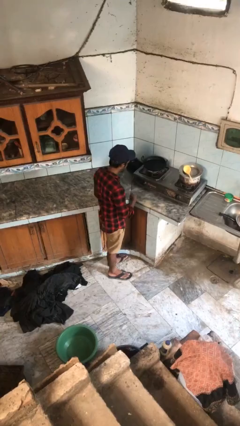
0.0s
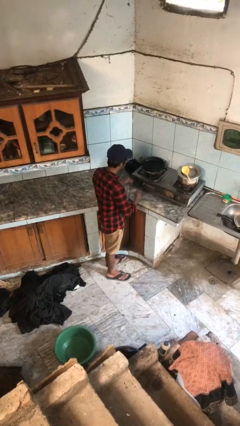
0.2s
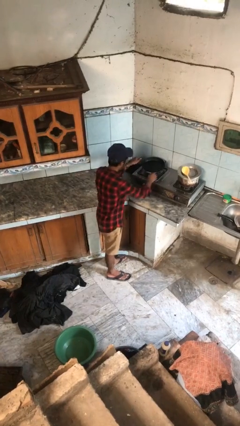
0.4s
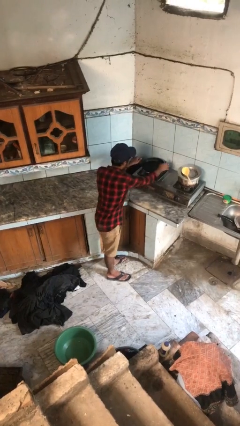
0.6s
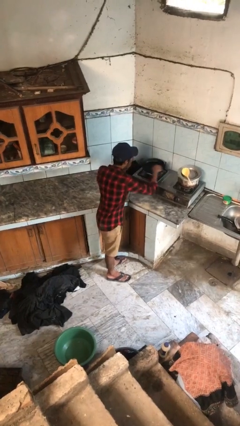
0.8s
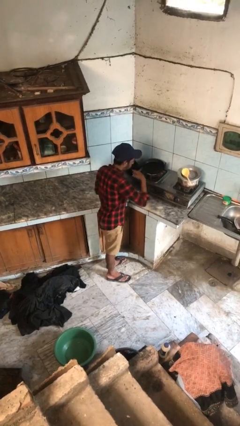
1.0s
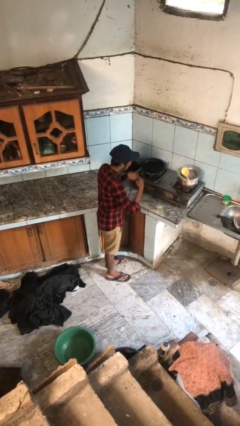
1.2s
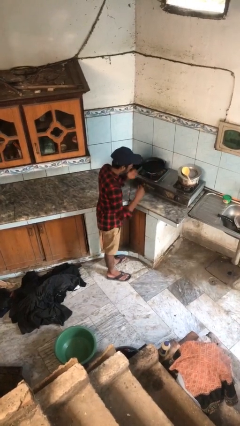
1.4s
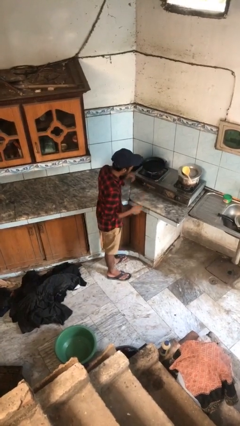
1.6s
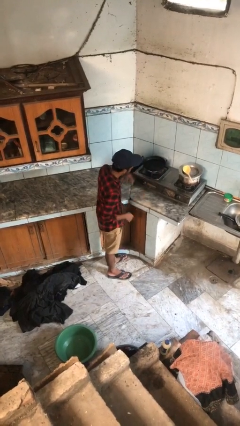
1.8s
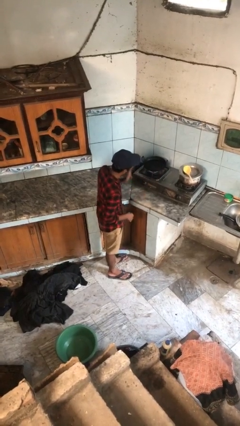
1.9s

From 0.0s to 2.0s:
person burns hand

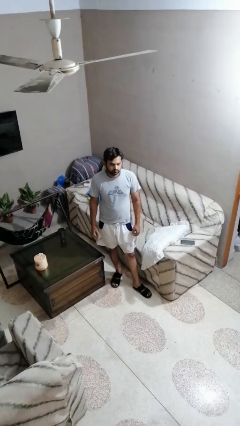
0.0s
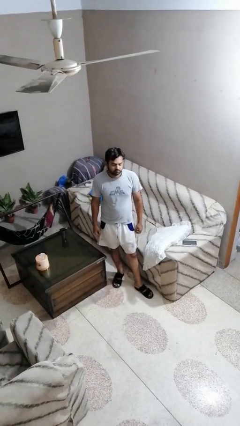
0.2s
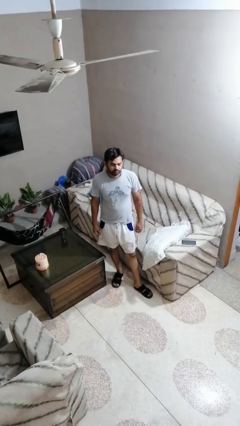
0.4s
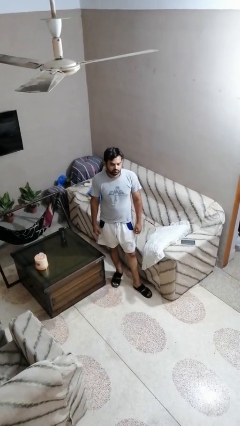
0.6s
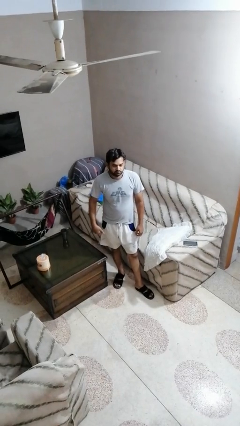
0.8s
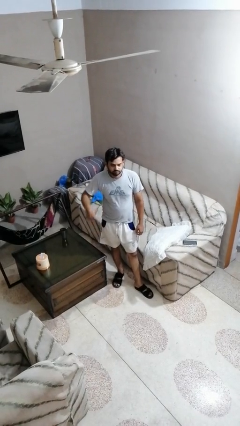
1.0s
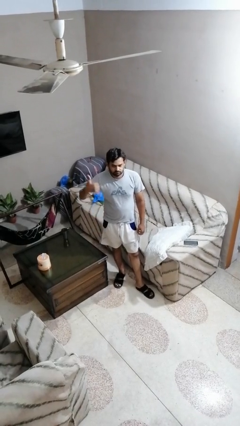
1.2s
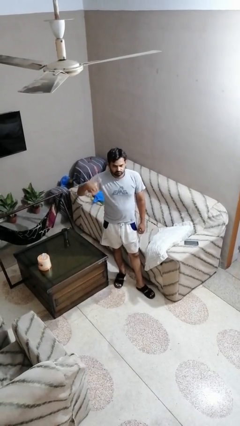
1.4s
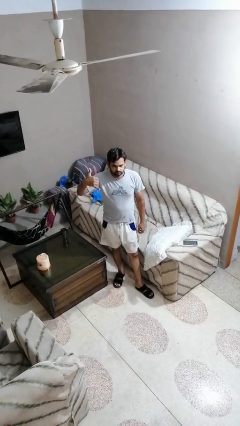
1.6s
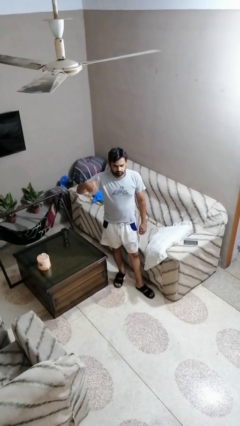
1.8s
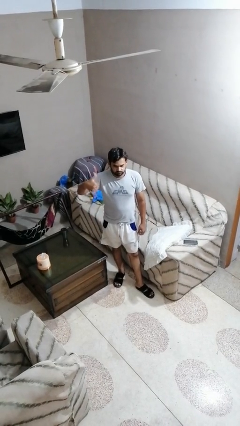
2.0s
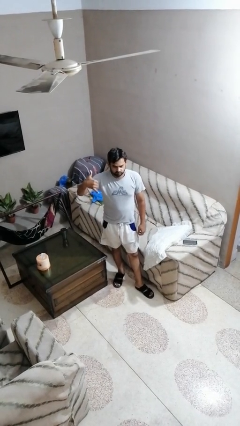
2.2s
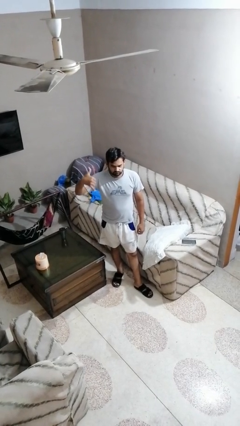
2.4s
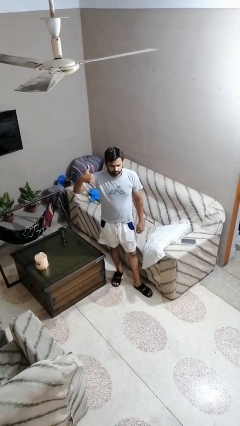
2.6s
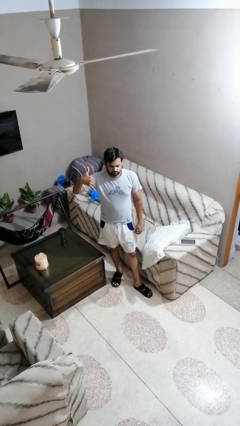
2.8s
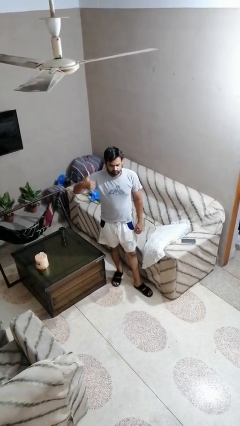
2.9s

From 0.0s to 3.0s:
person gestures hang loose

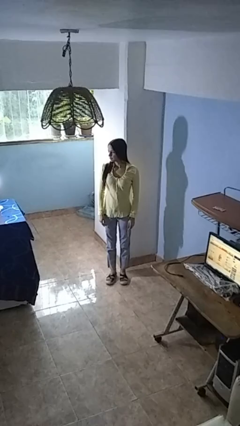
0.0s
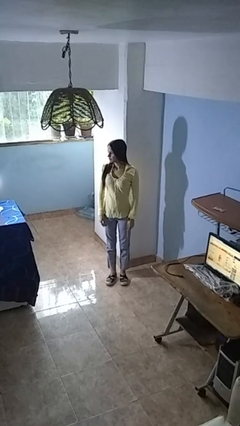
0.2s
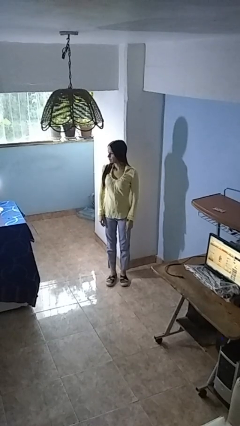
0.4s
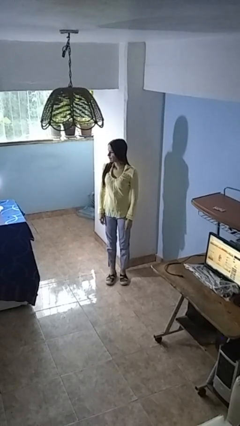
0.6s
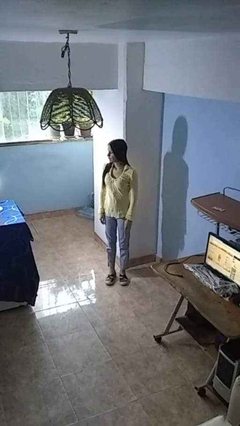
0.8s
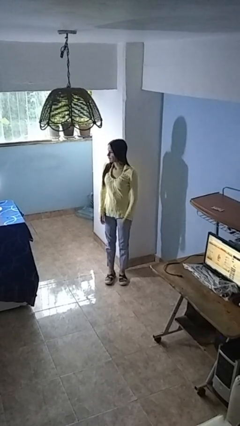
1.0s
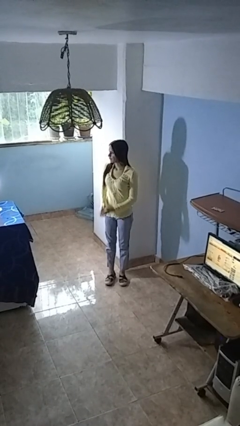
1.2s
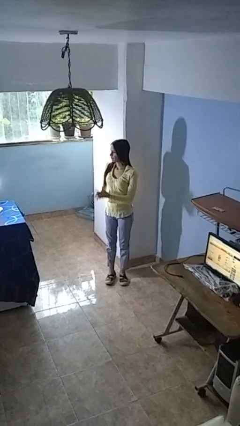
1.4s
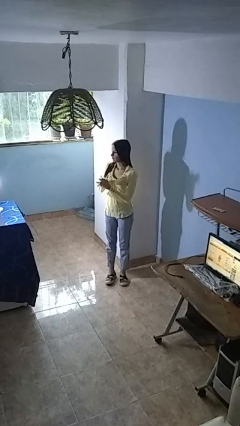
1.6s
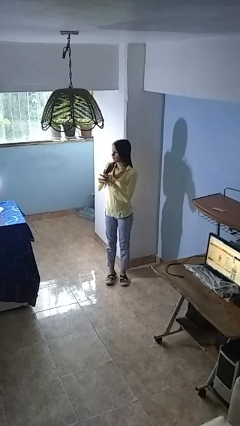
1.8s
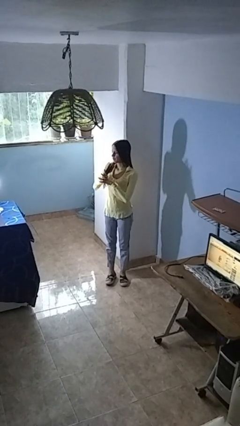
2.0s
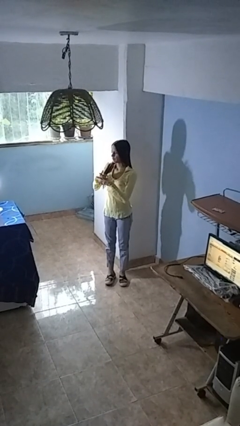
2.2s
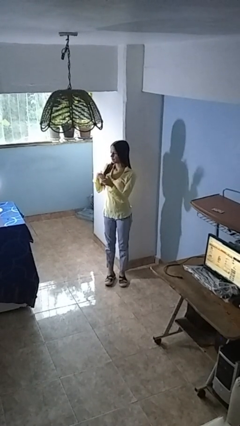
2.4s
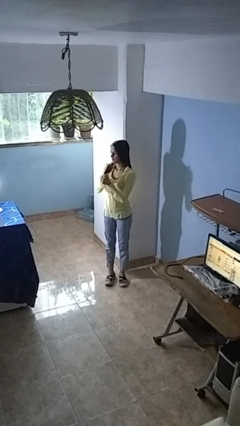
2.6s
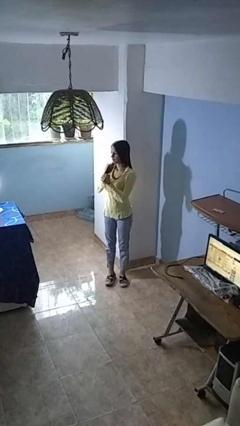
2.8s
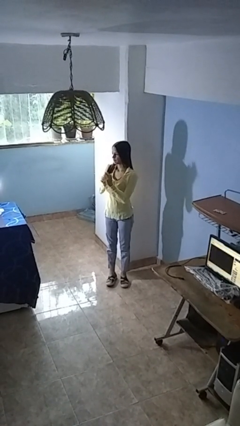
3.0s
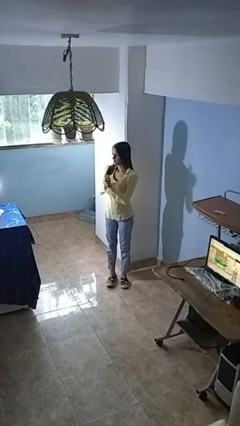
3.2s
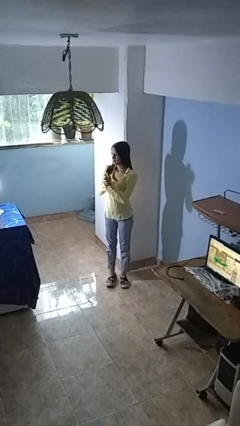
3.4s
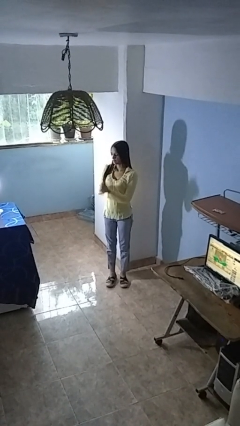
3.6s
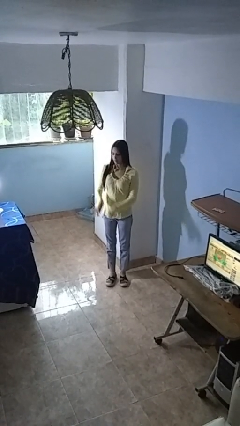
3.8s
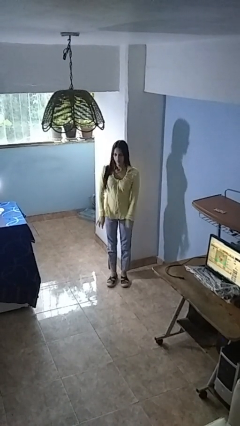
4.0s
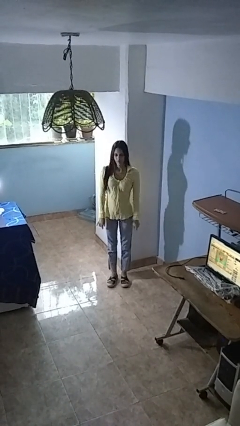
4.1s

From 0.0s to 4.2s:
person cracks knuckles

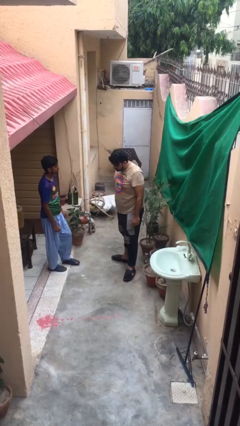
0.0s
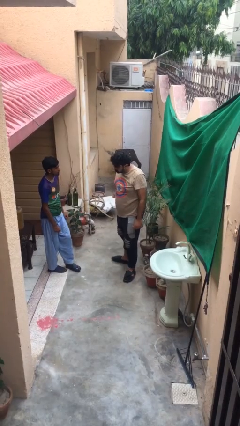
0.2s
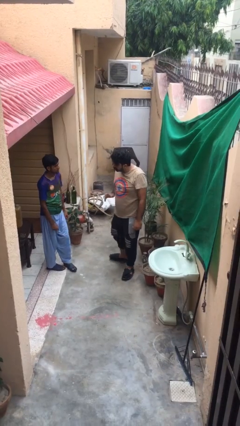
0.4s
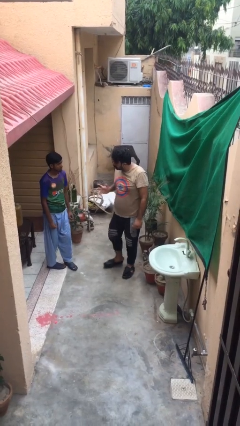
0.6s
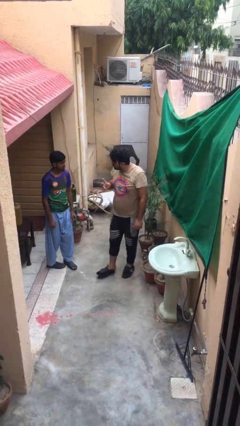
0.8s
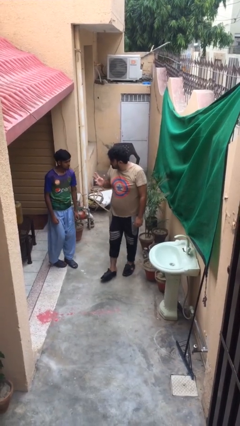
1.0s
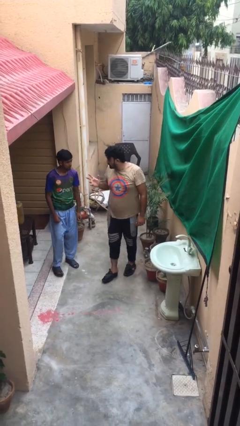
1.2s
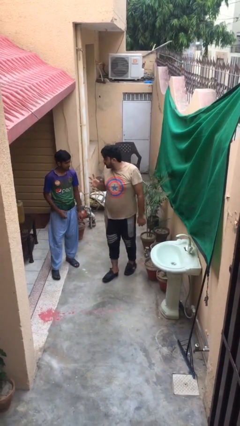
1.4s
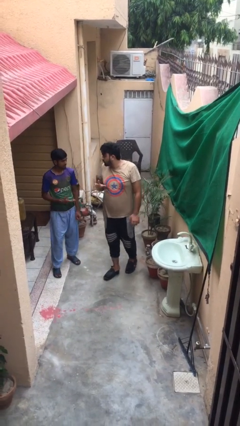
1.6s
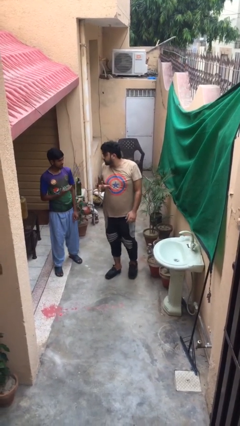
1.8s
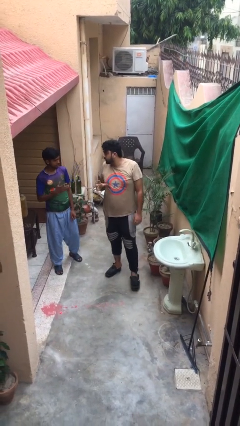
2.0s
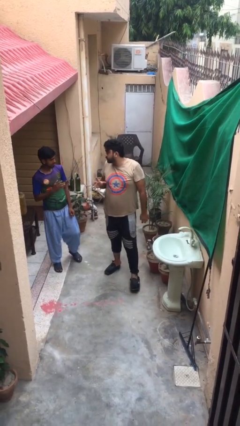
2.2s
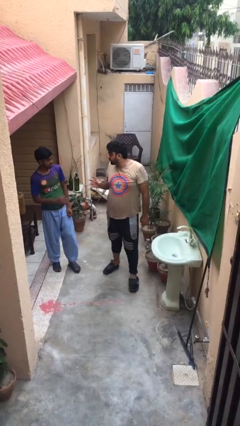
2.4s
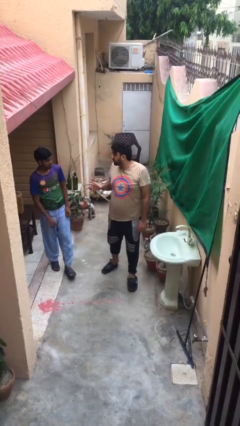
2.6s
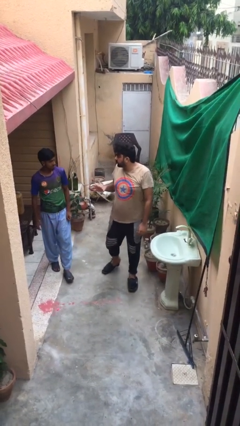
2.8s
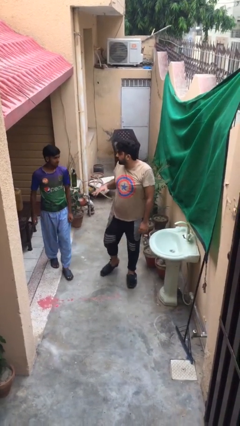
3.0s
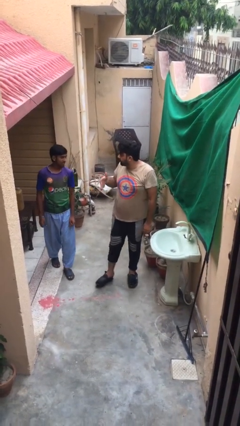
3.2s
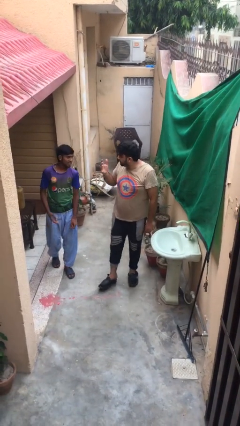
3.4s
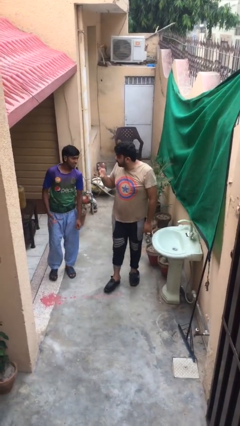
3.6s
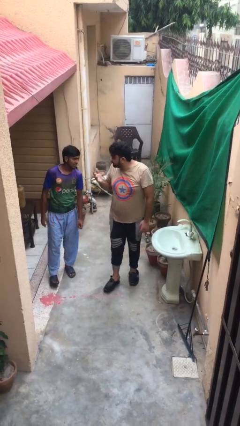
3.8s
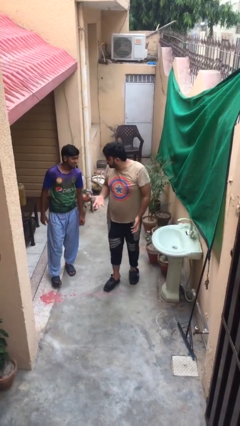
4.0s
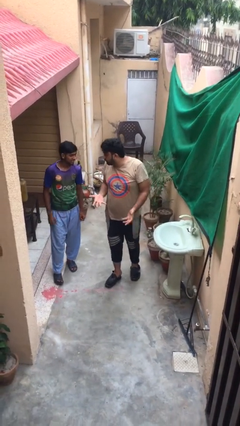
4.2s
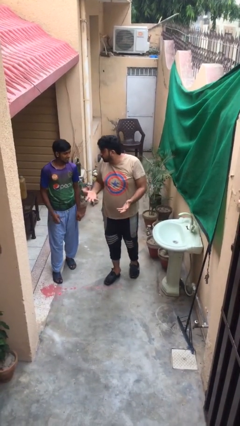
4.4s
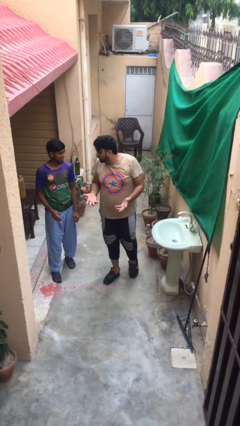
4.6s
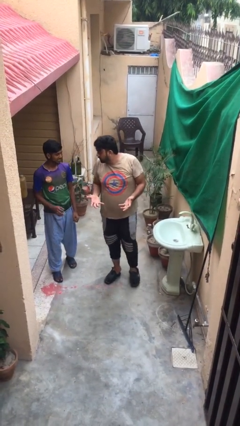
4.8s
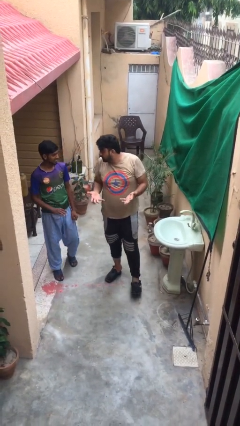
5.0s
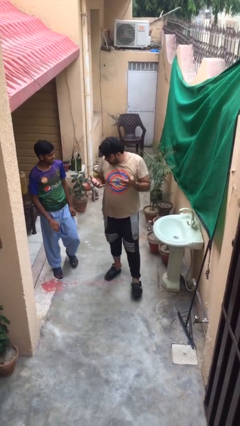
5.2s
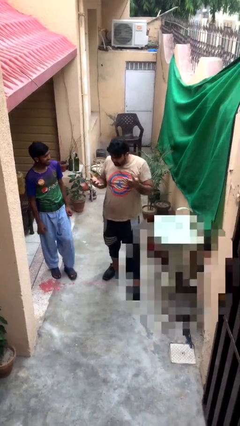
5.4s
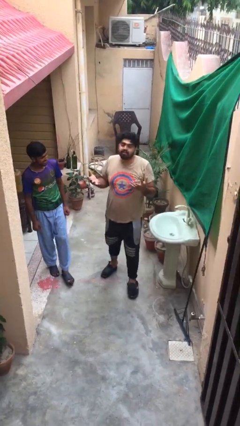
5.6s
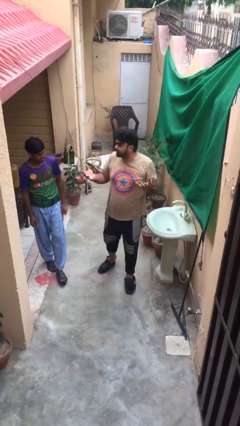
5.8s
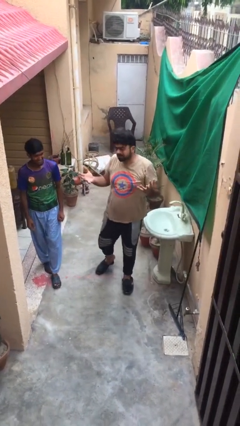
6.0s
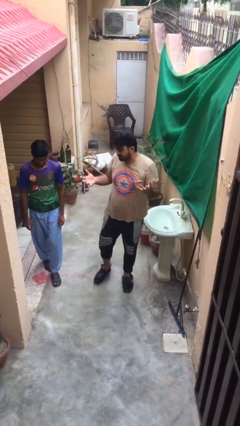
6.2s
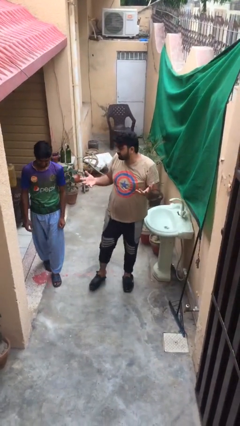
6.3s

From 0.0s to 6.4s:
person talks to person

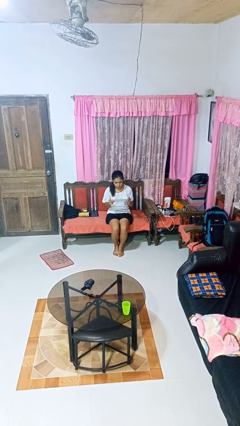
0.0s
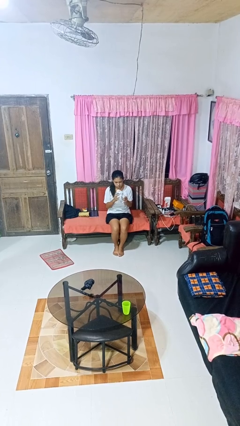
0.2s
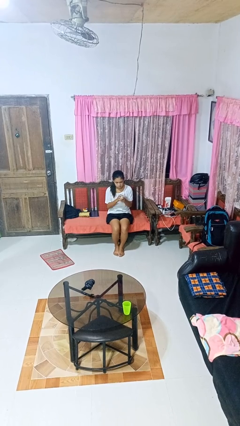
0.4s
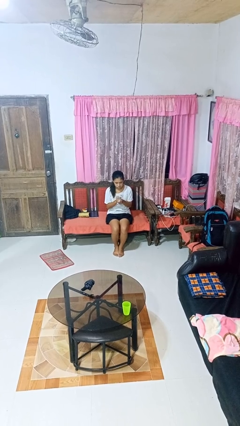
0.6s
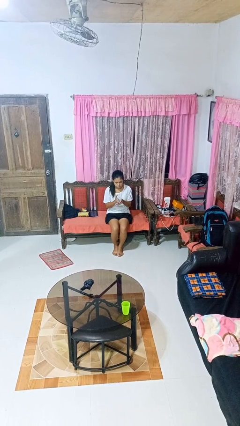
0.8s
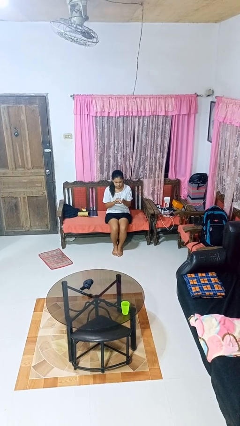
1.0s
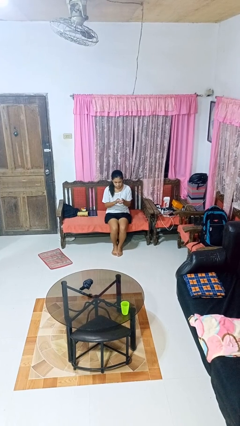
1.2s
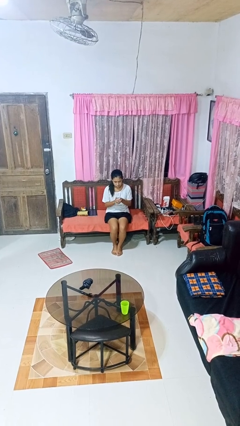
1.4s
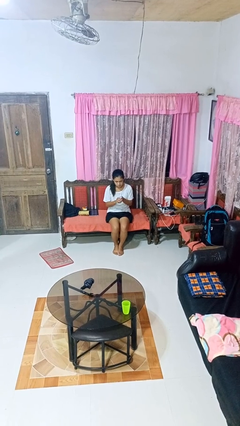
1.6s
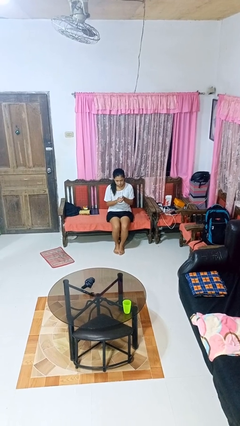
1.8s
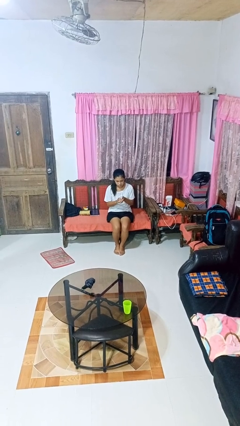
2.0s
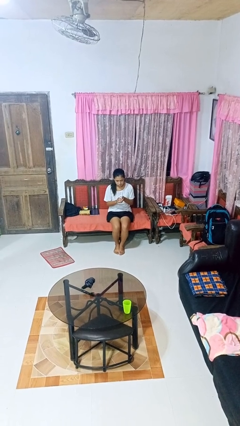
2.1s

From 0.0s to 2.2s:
person crumples paper
